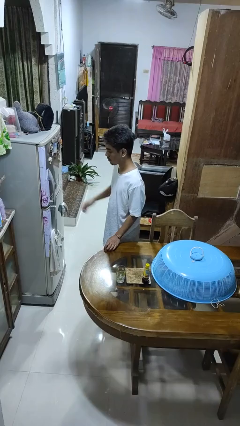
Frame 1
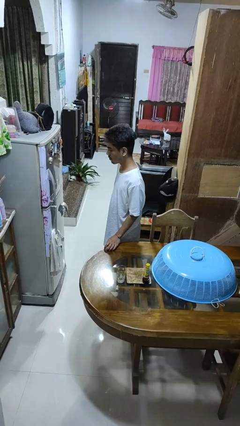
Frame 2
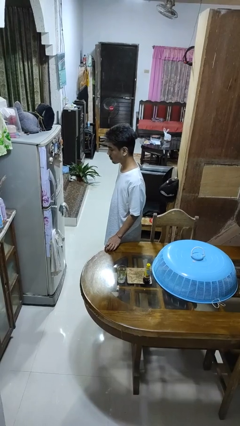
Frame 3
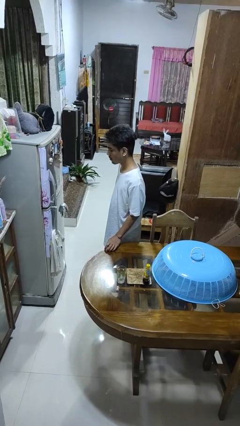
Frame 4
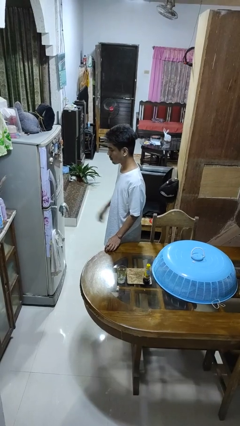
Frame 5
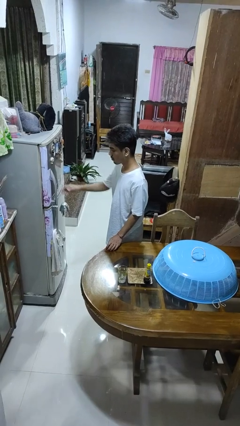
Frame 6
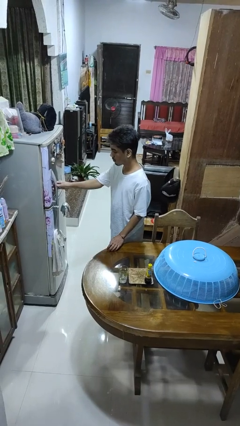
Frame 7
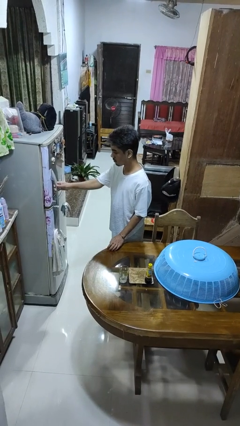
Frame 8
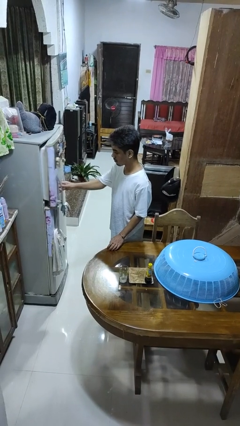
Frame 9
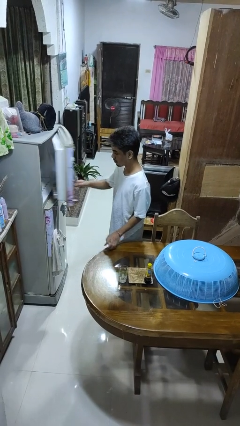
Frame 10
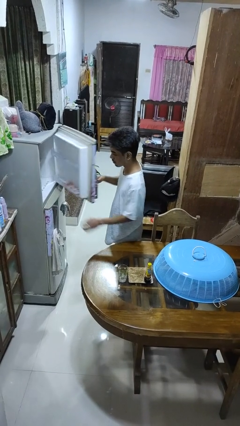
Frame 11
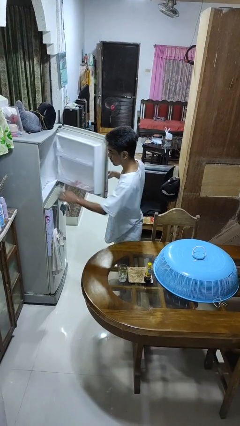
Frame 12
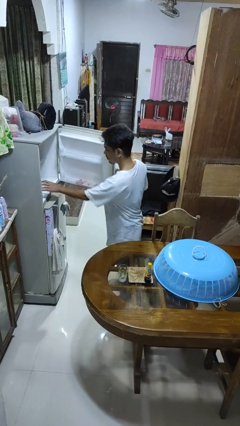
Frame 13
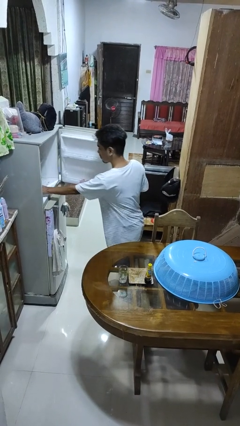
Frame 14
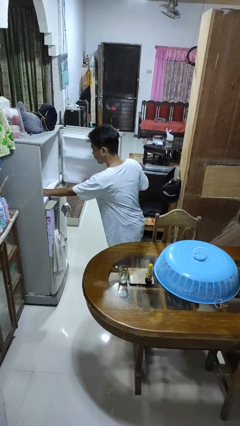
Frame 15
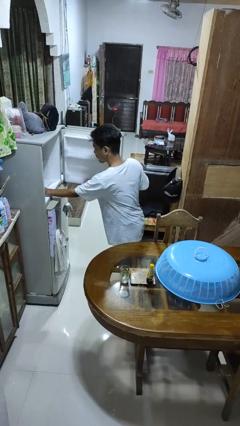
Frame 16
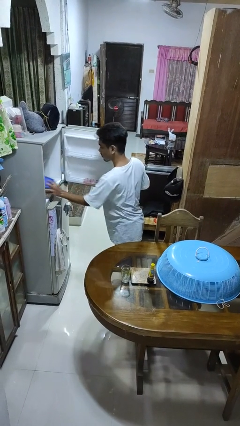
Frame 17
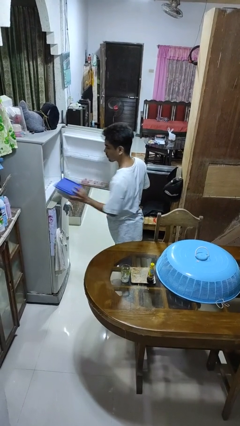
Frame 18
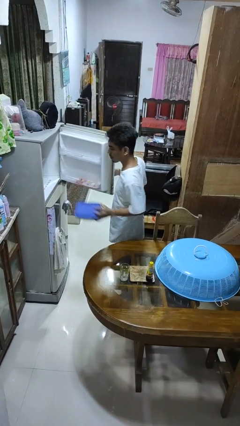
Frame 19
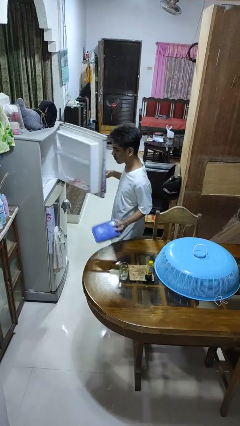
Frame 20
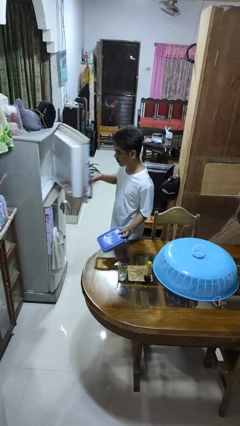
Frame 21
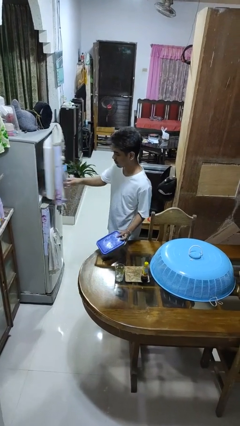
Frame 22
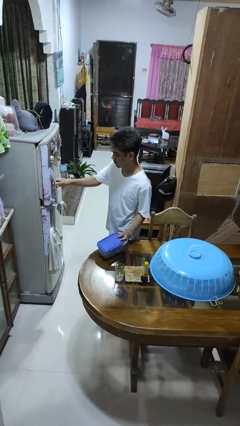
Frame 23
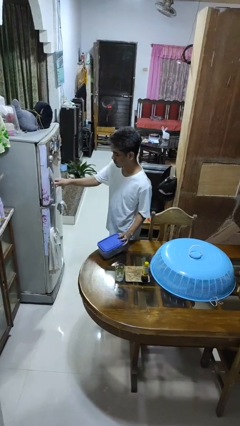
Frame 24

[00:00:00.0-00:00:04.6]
person takes object from refrigerator

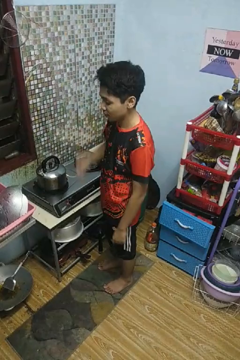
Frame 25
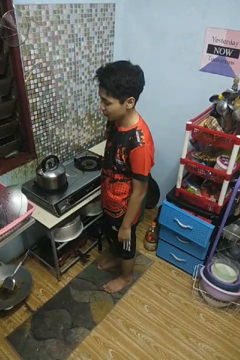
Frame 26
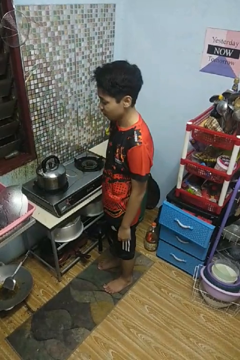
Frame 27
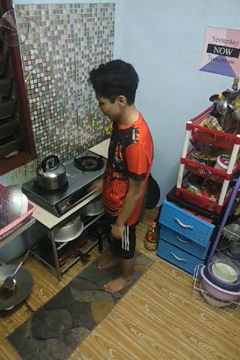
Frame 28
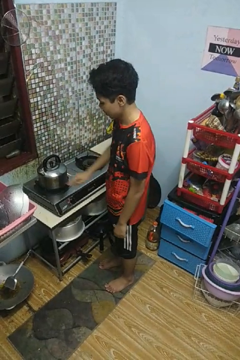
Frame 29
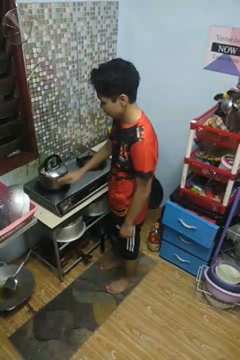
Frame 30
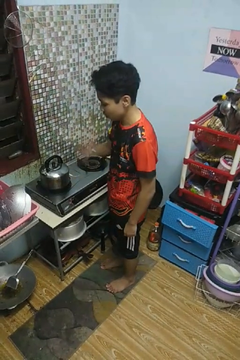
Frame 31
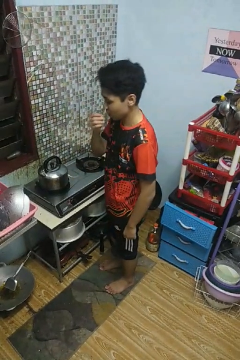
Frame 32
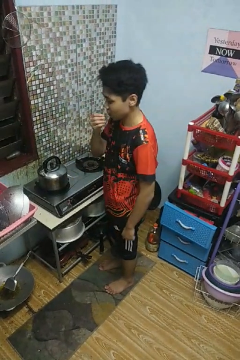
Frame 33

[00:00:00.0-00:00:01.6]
person burns hand

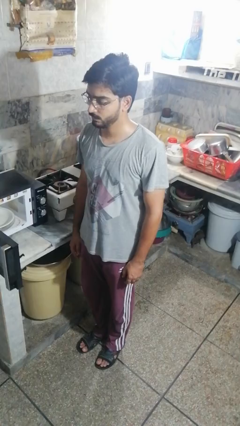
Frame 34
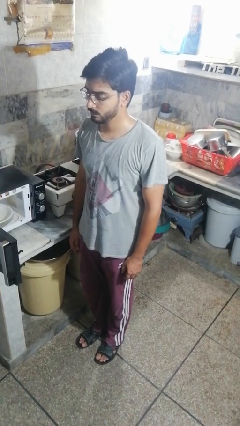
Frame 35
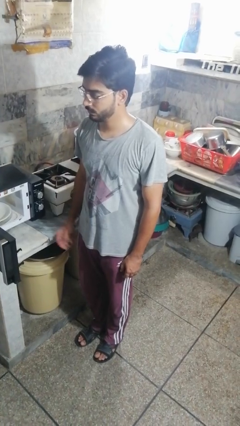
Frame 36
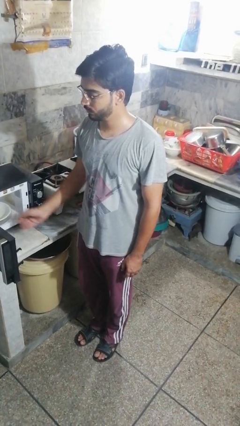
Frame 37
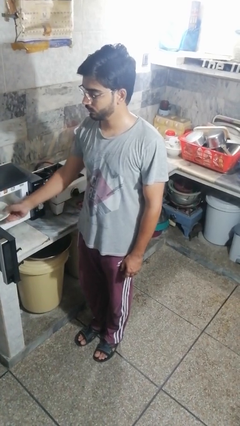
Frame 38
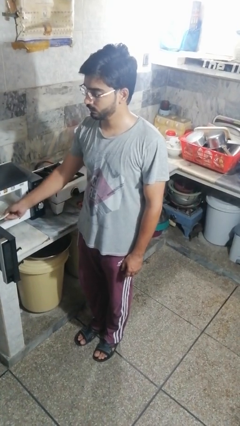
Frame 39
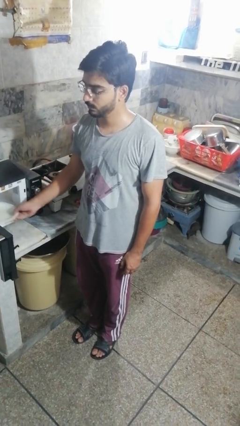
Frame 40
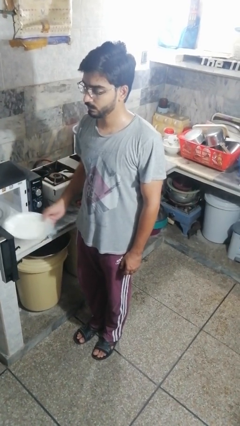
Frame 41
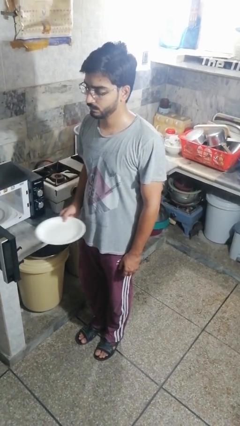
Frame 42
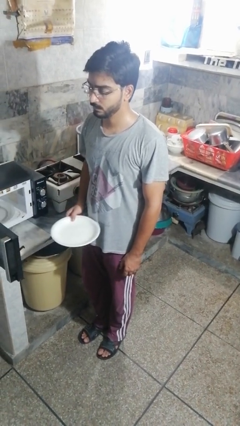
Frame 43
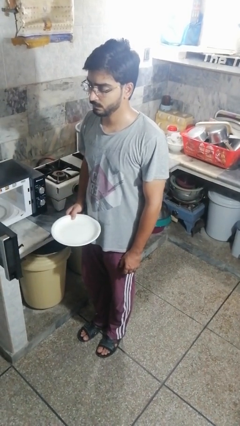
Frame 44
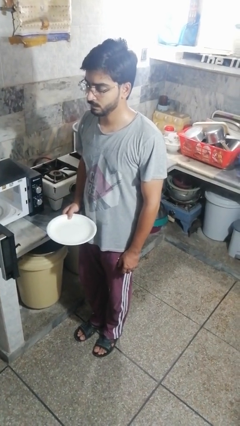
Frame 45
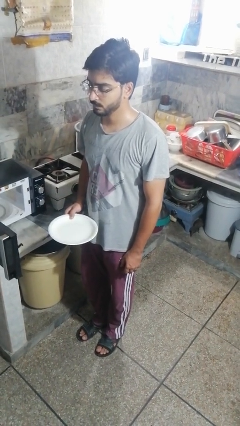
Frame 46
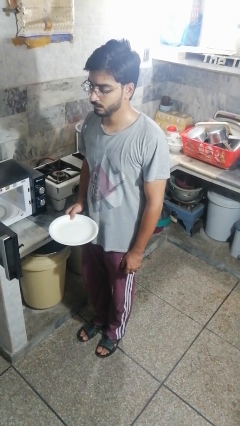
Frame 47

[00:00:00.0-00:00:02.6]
person takes object from oven

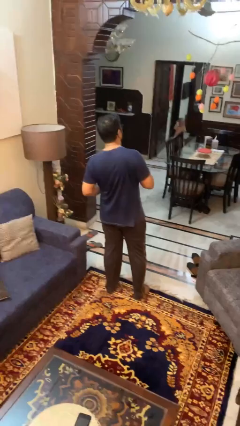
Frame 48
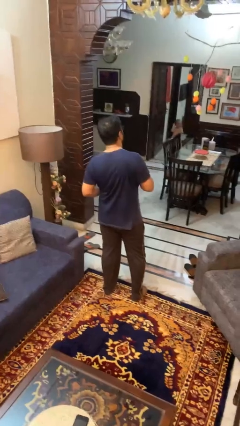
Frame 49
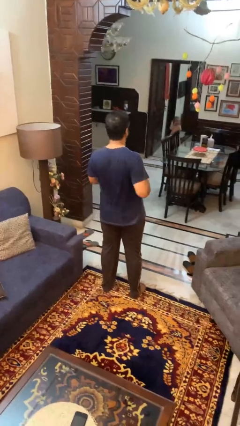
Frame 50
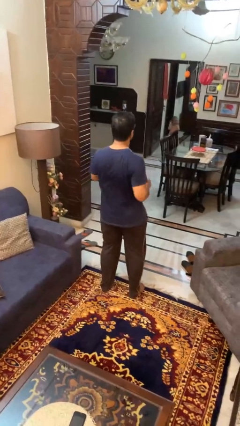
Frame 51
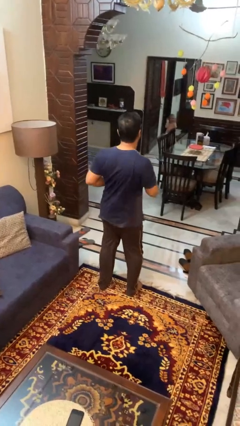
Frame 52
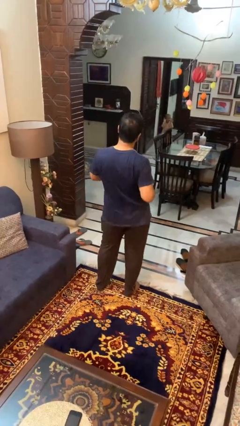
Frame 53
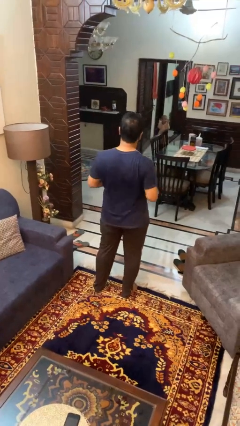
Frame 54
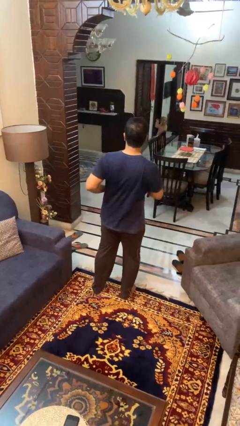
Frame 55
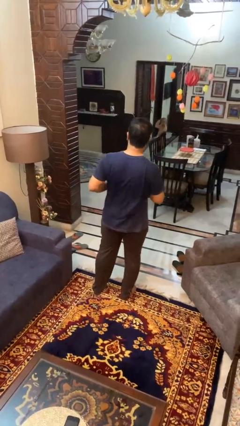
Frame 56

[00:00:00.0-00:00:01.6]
person wiggles hips

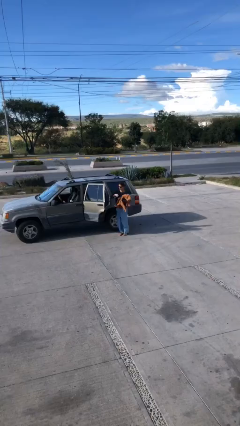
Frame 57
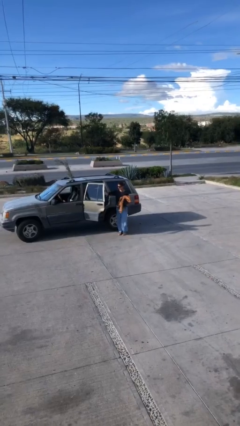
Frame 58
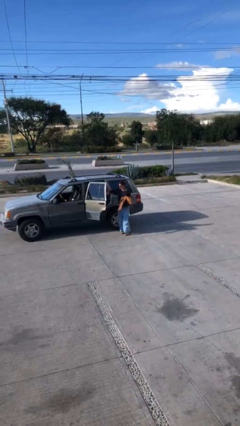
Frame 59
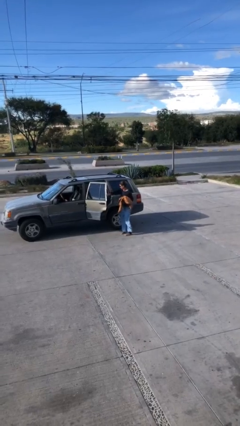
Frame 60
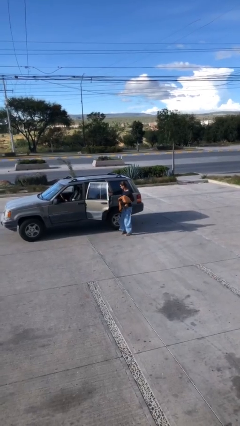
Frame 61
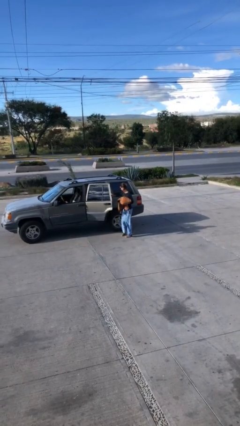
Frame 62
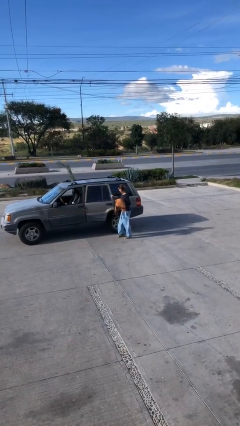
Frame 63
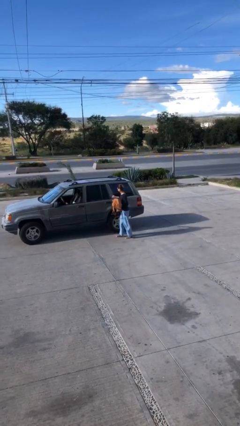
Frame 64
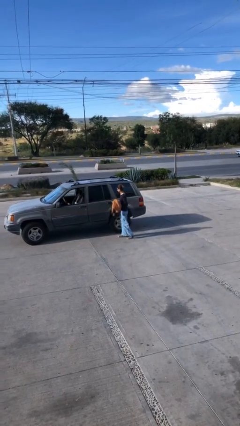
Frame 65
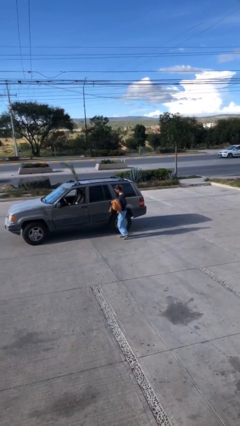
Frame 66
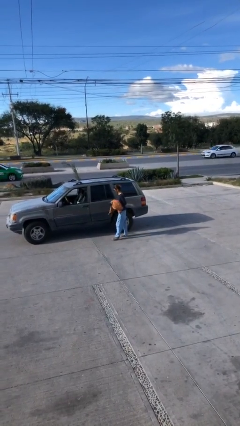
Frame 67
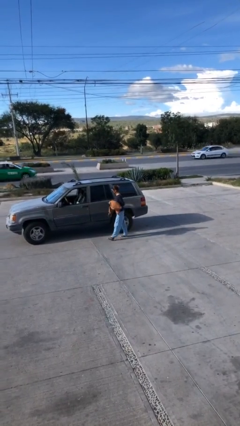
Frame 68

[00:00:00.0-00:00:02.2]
person closes car door

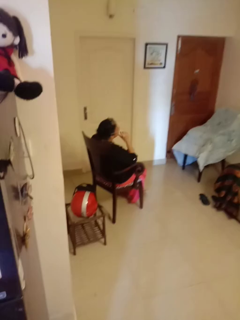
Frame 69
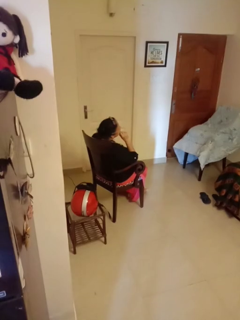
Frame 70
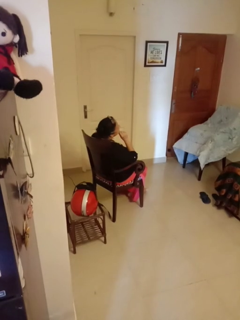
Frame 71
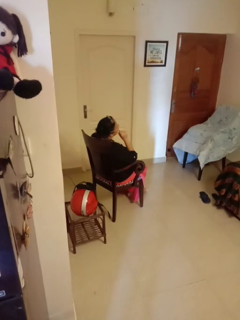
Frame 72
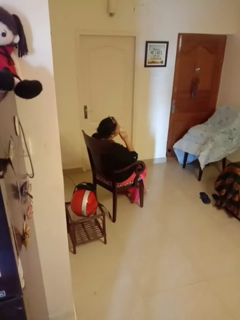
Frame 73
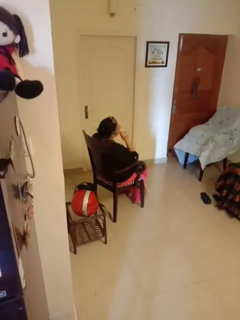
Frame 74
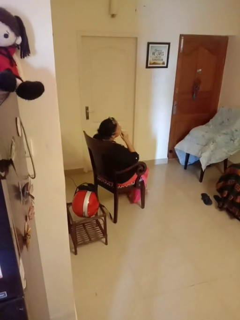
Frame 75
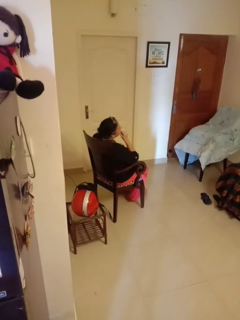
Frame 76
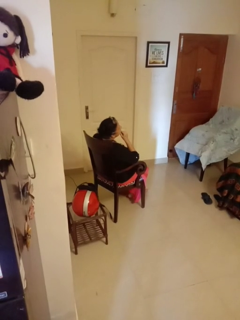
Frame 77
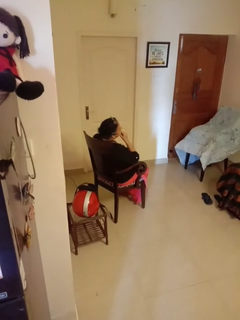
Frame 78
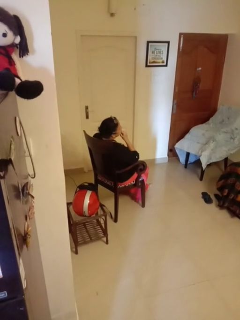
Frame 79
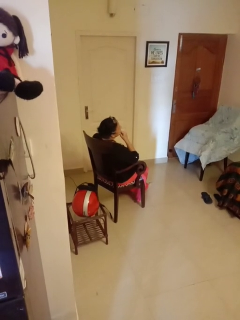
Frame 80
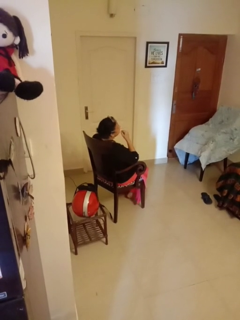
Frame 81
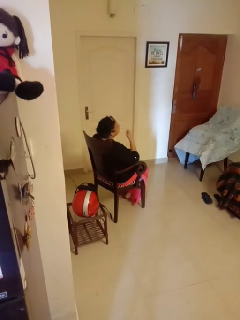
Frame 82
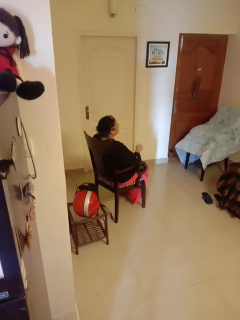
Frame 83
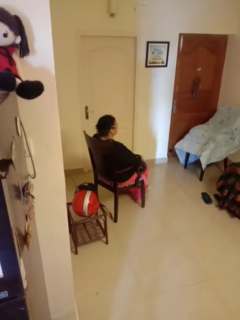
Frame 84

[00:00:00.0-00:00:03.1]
person strokes chin

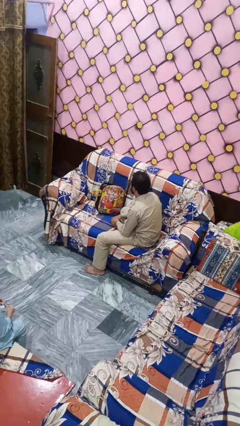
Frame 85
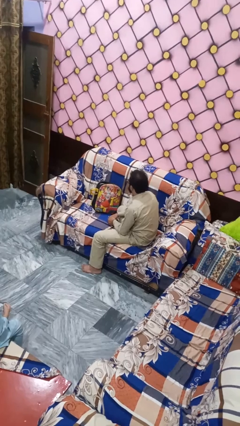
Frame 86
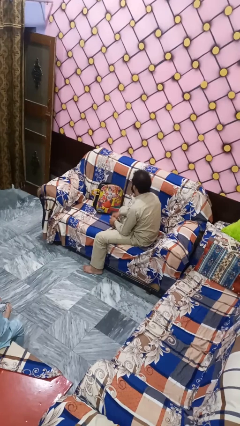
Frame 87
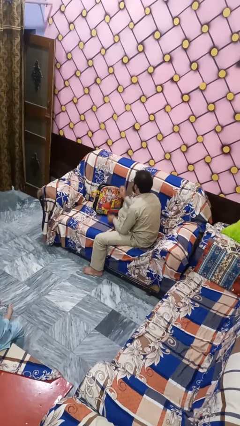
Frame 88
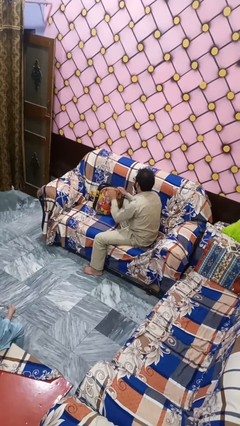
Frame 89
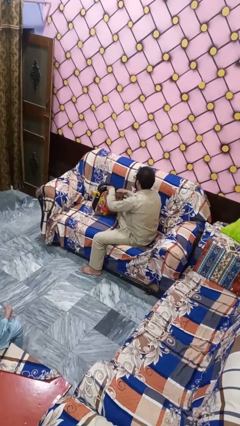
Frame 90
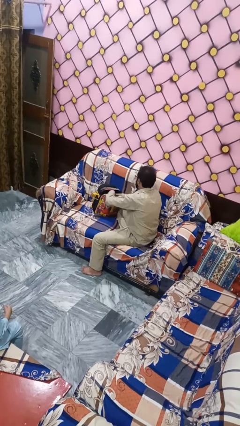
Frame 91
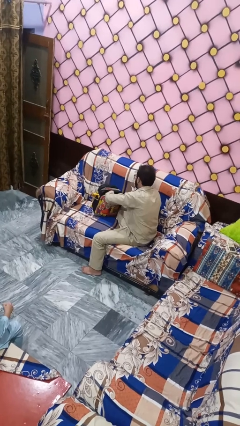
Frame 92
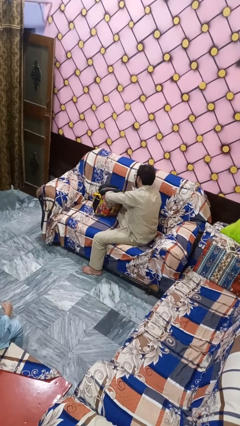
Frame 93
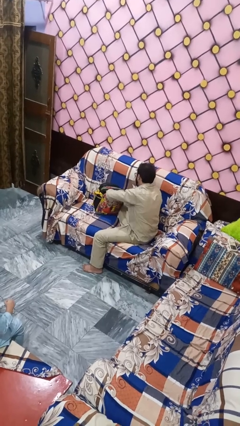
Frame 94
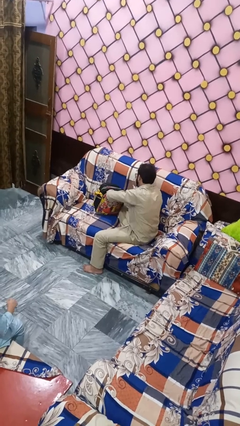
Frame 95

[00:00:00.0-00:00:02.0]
person searches in bag

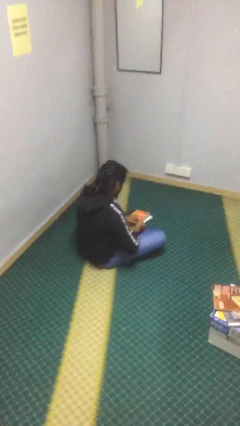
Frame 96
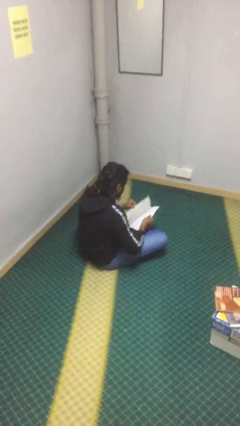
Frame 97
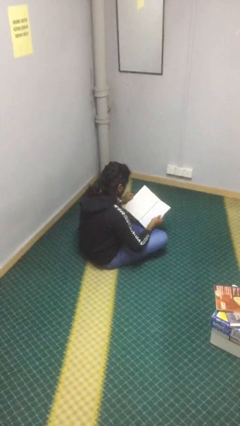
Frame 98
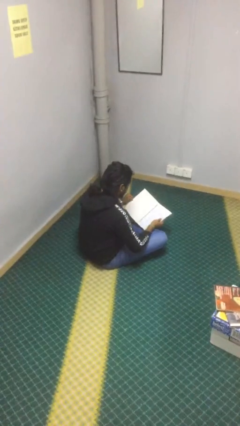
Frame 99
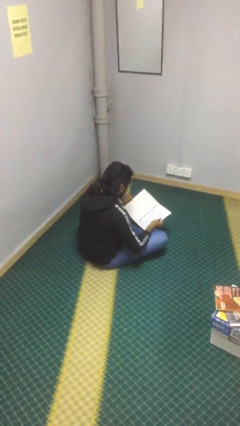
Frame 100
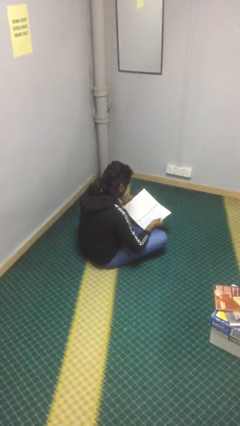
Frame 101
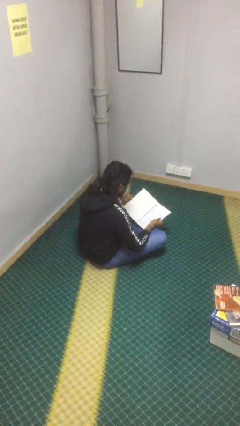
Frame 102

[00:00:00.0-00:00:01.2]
person reads book
